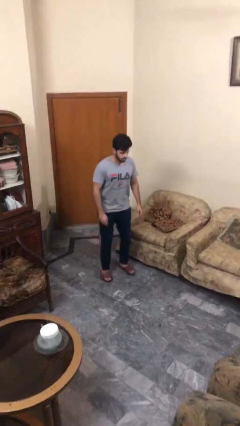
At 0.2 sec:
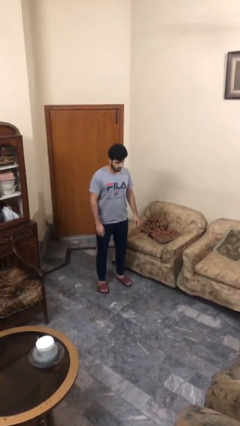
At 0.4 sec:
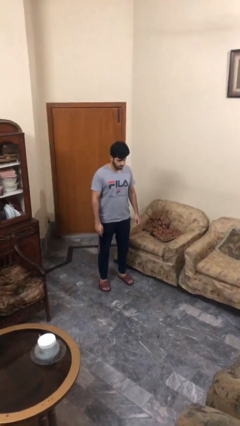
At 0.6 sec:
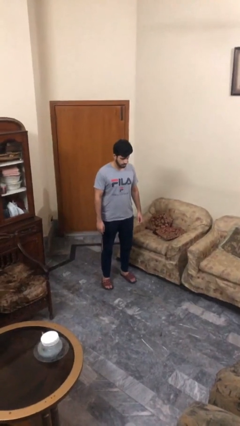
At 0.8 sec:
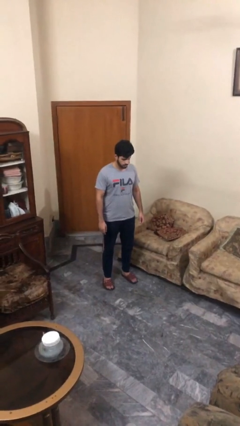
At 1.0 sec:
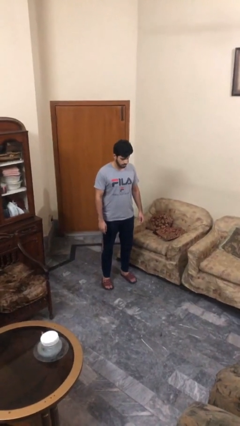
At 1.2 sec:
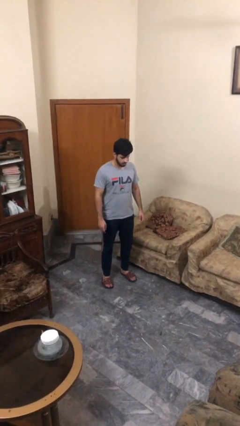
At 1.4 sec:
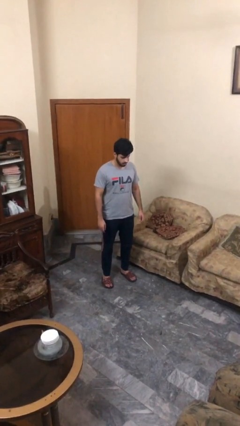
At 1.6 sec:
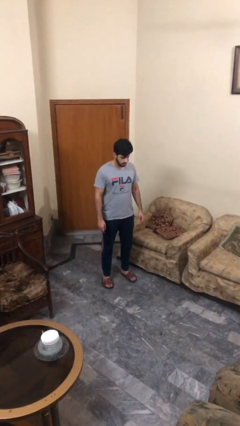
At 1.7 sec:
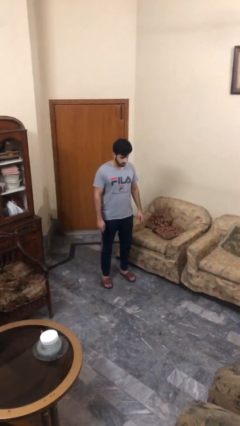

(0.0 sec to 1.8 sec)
person stands up

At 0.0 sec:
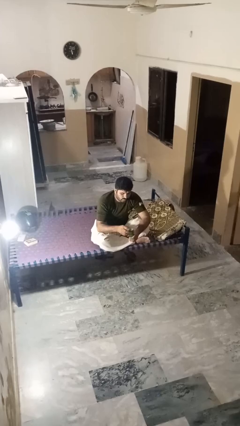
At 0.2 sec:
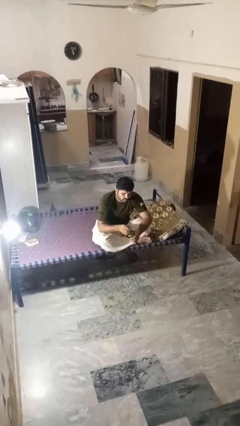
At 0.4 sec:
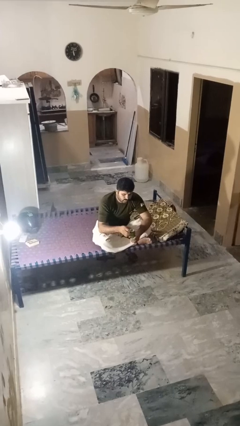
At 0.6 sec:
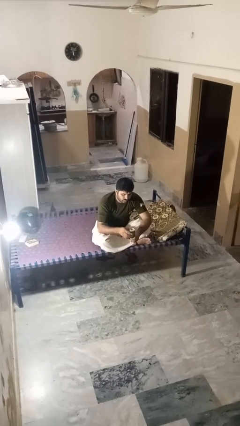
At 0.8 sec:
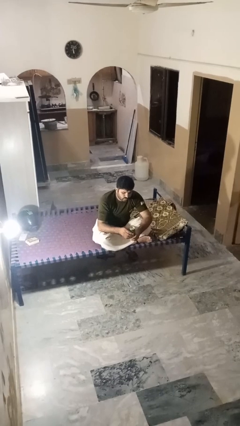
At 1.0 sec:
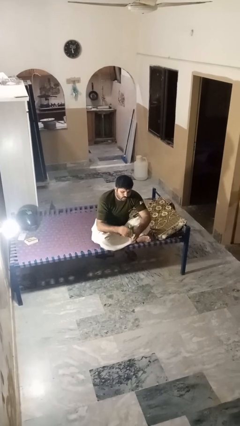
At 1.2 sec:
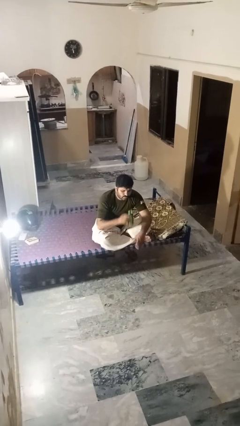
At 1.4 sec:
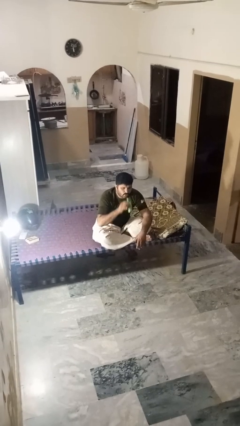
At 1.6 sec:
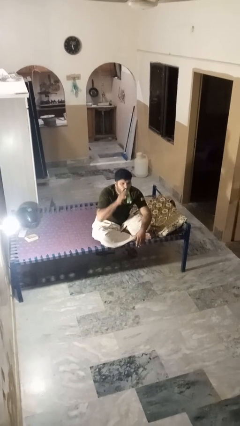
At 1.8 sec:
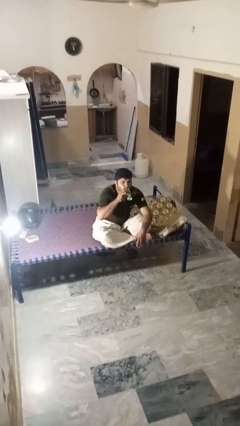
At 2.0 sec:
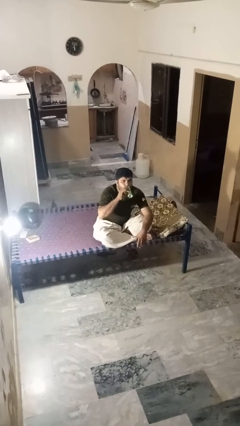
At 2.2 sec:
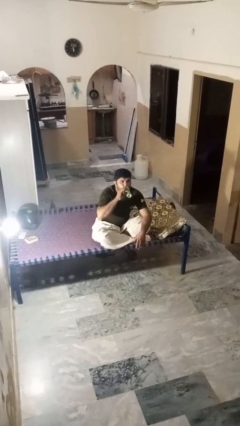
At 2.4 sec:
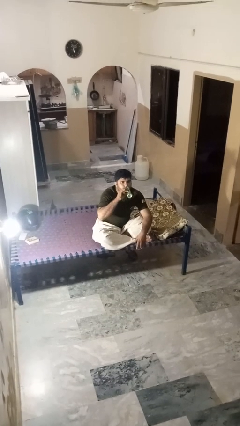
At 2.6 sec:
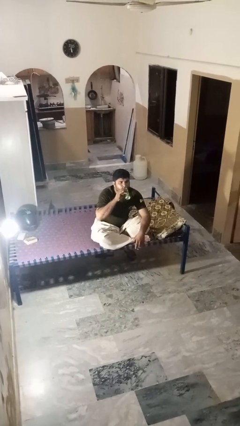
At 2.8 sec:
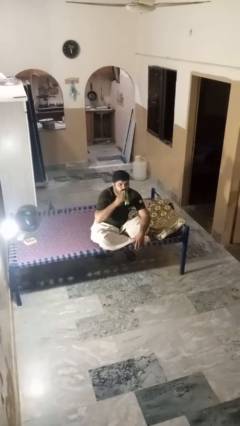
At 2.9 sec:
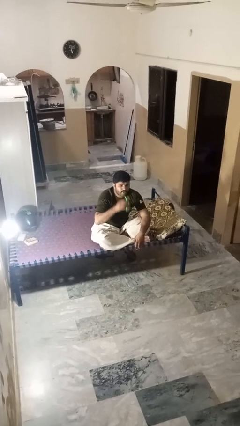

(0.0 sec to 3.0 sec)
person drinks from beverage can

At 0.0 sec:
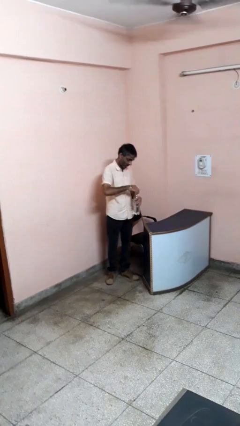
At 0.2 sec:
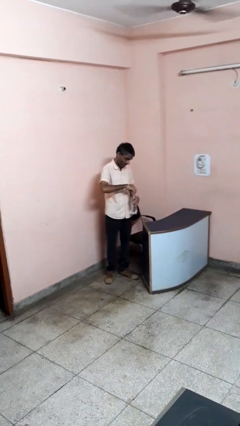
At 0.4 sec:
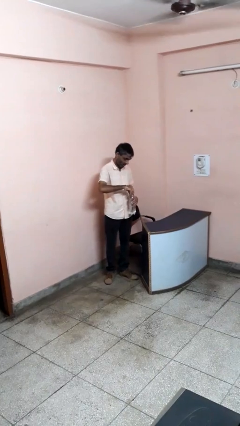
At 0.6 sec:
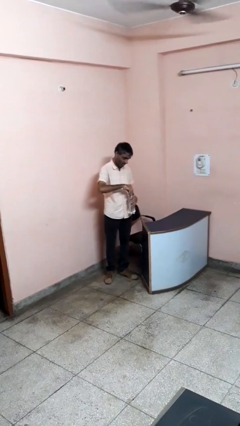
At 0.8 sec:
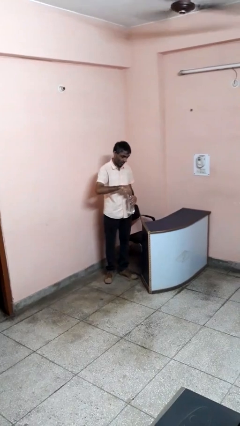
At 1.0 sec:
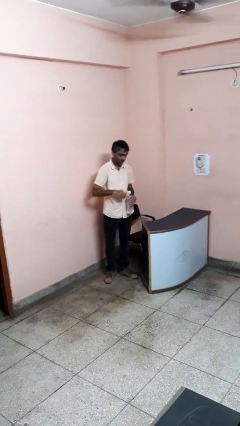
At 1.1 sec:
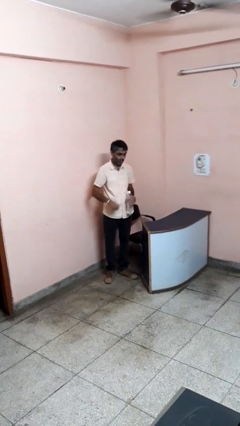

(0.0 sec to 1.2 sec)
person screws lid to bottle

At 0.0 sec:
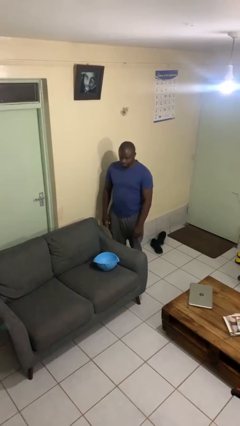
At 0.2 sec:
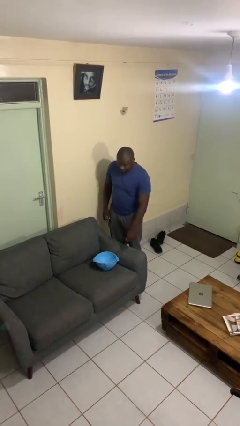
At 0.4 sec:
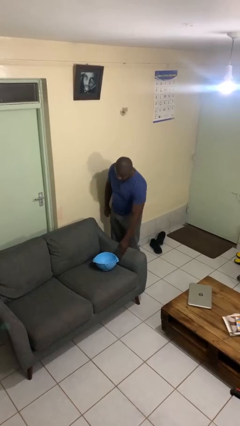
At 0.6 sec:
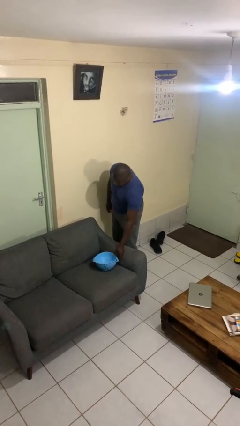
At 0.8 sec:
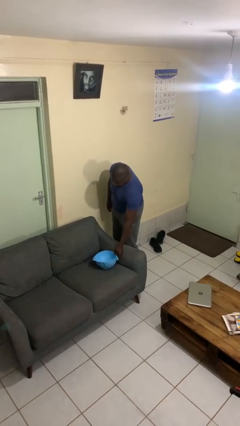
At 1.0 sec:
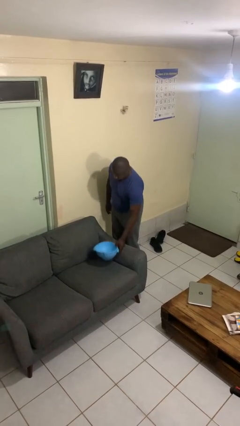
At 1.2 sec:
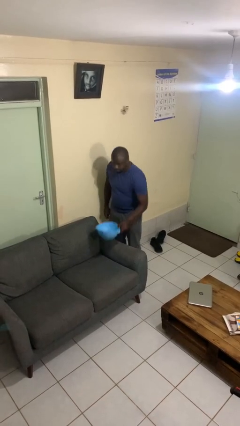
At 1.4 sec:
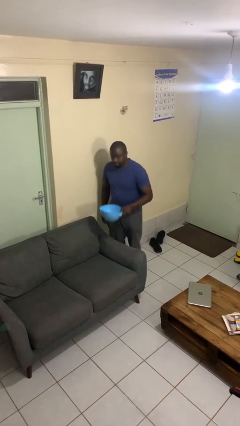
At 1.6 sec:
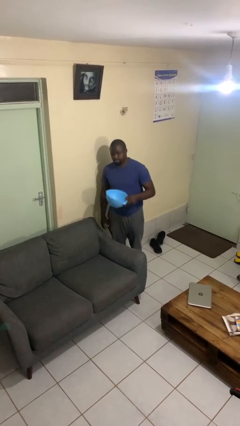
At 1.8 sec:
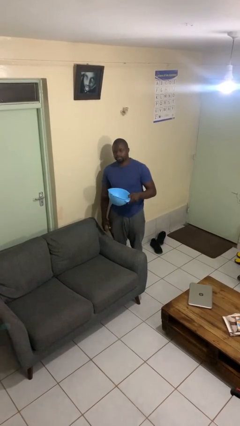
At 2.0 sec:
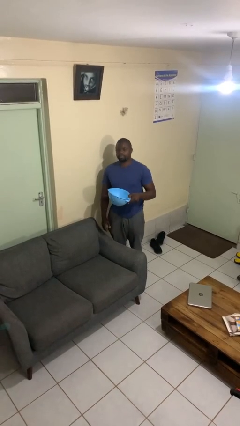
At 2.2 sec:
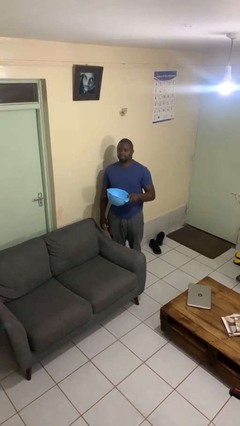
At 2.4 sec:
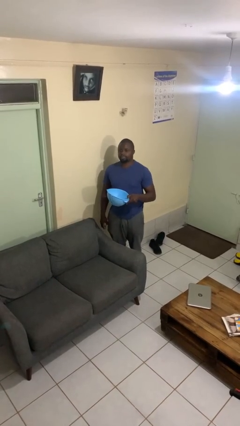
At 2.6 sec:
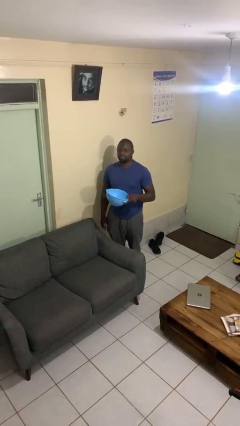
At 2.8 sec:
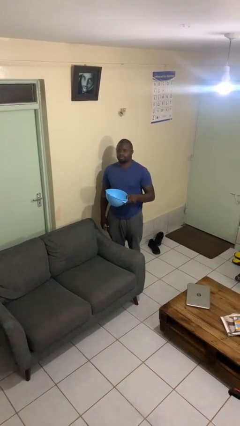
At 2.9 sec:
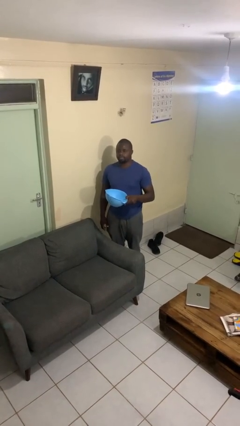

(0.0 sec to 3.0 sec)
person picks up object from couch

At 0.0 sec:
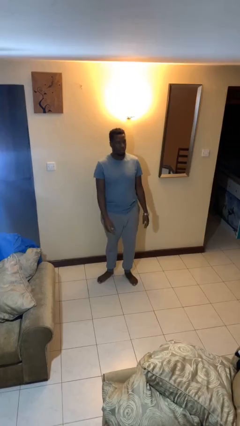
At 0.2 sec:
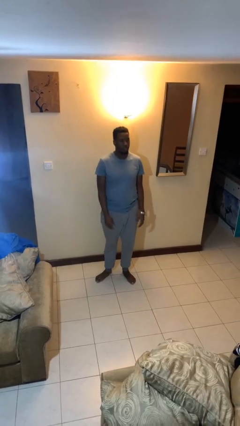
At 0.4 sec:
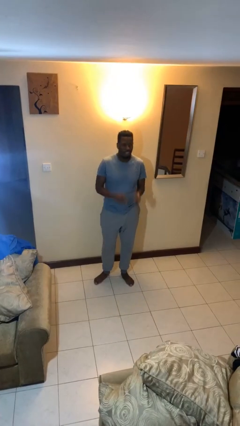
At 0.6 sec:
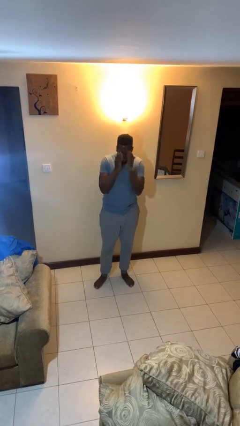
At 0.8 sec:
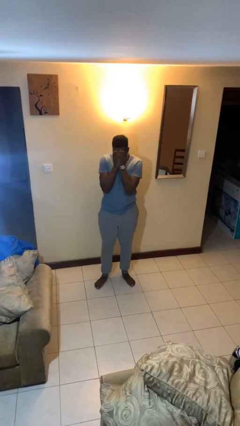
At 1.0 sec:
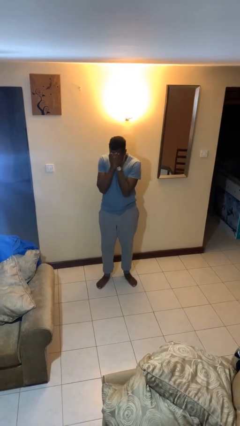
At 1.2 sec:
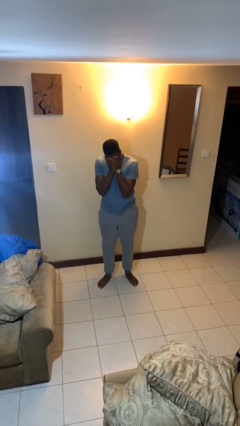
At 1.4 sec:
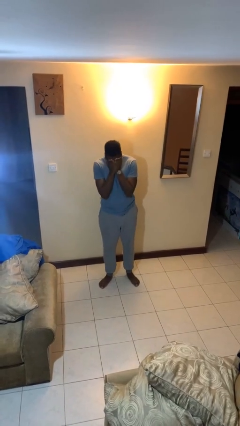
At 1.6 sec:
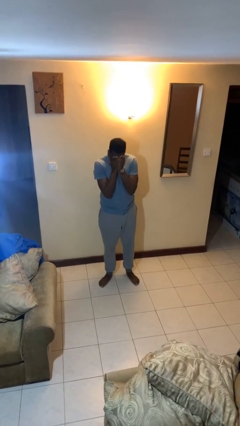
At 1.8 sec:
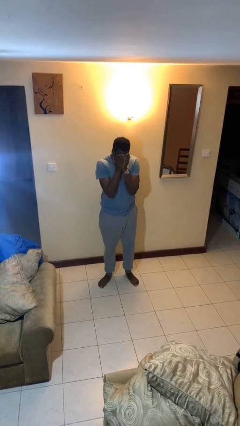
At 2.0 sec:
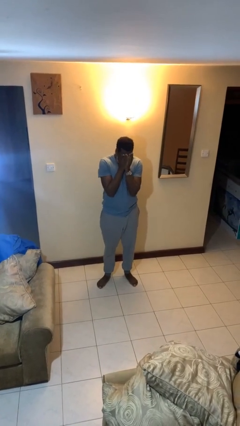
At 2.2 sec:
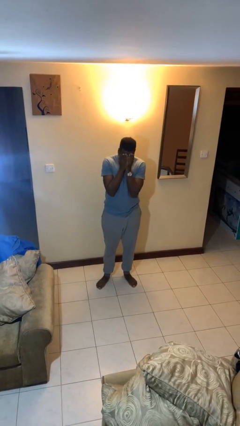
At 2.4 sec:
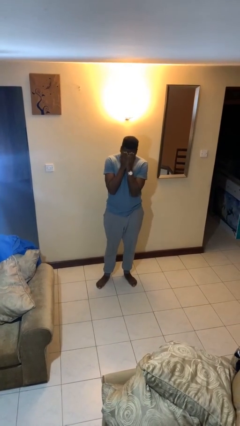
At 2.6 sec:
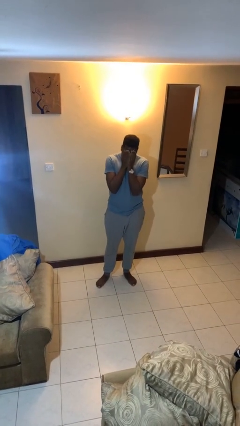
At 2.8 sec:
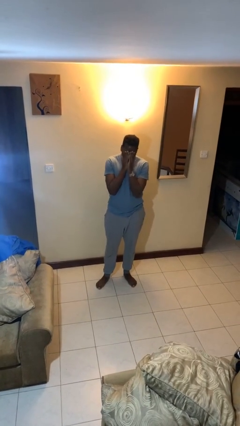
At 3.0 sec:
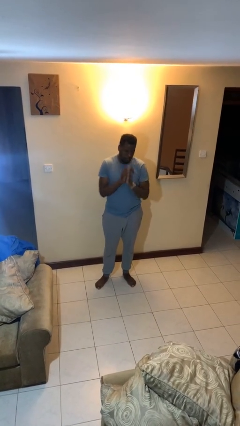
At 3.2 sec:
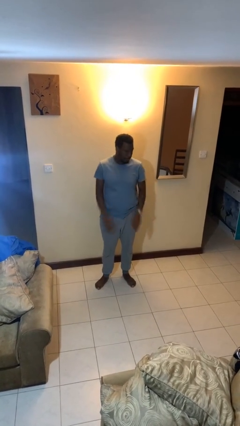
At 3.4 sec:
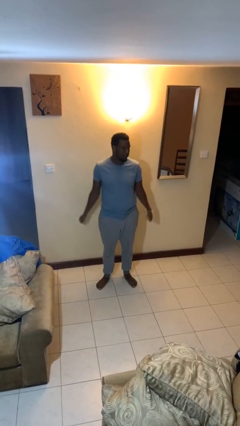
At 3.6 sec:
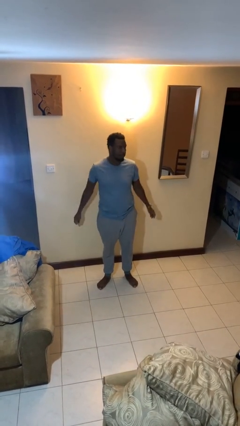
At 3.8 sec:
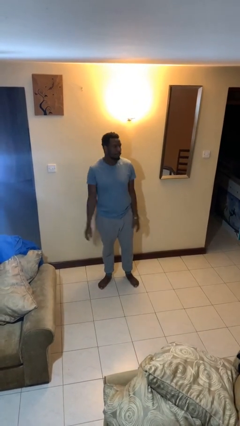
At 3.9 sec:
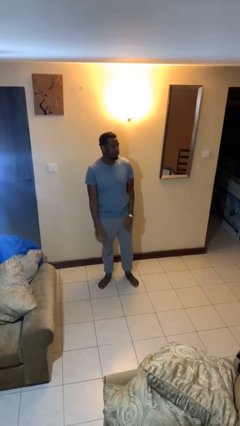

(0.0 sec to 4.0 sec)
person covers face with hands

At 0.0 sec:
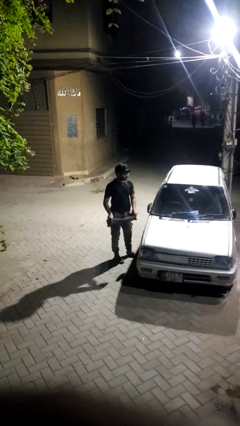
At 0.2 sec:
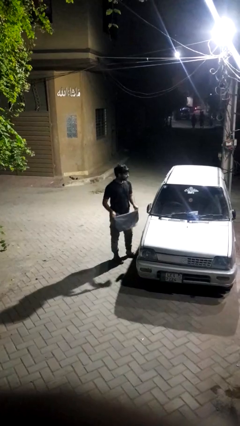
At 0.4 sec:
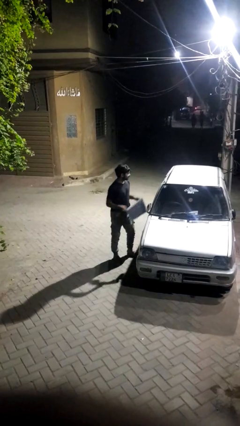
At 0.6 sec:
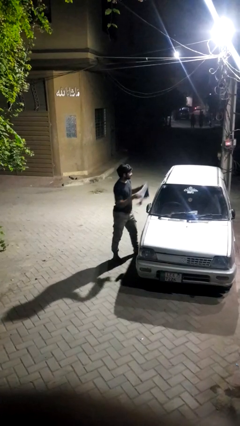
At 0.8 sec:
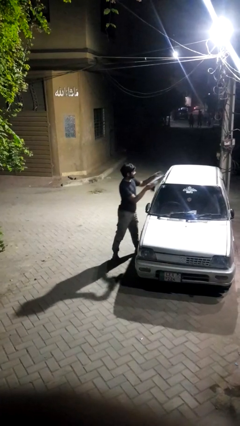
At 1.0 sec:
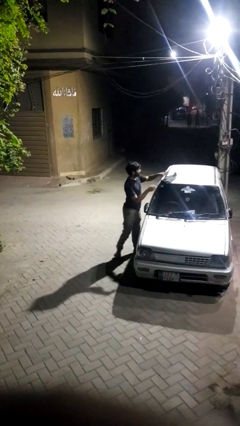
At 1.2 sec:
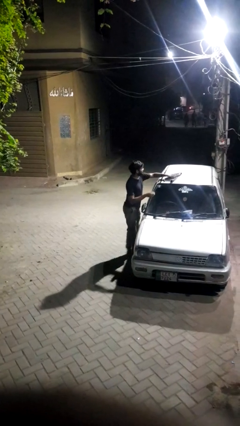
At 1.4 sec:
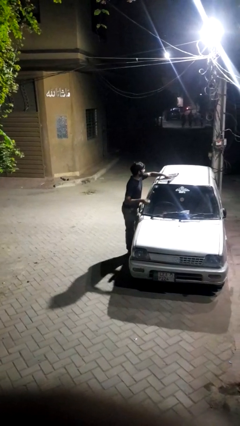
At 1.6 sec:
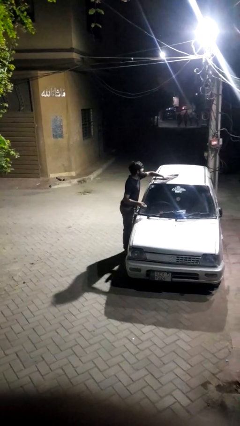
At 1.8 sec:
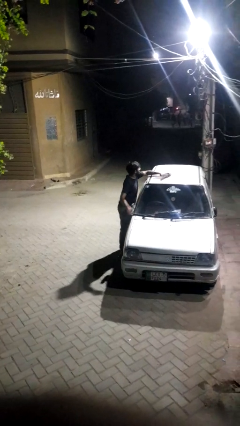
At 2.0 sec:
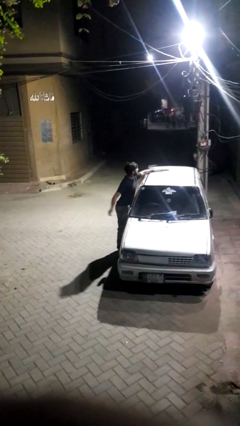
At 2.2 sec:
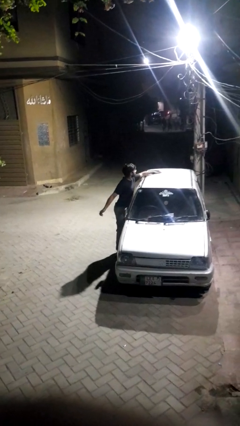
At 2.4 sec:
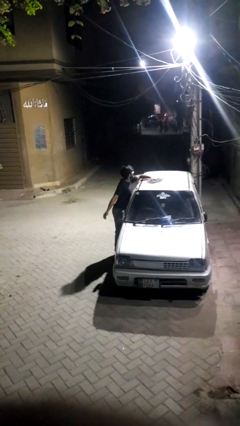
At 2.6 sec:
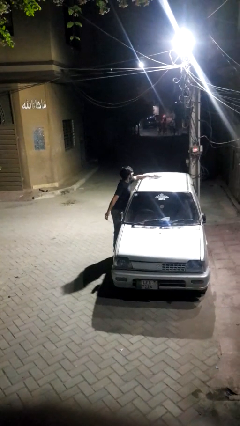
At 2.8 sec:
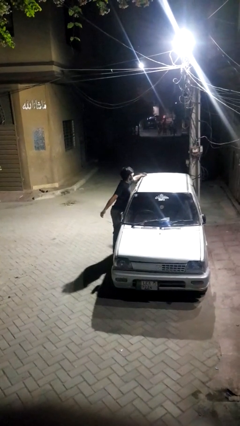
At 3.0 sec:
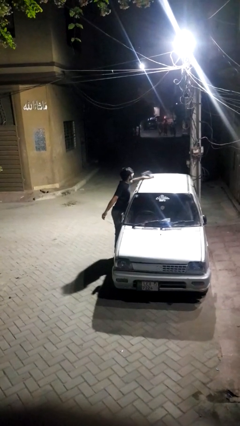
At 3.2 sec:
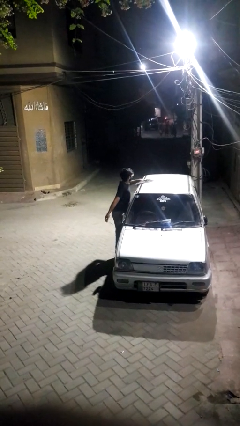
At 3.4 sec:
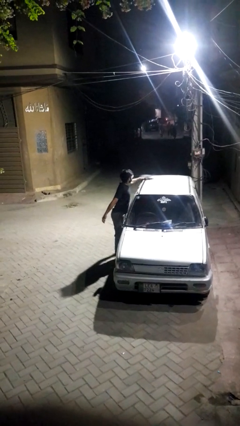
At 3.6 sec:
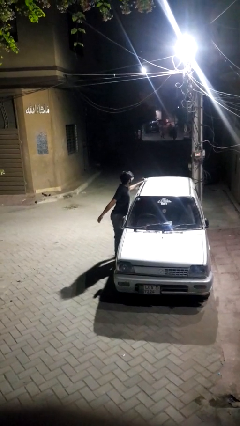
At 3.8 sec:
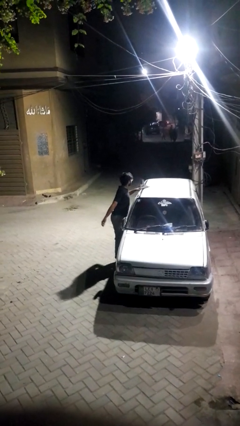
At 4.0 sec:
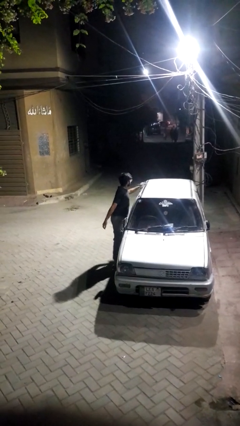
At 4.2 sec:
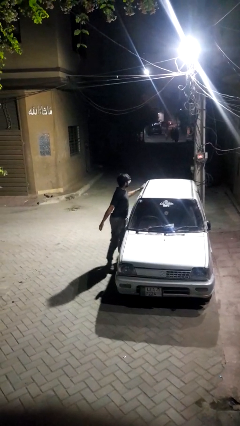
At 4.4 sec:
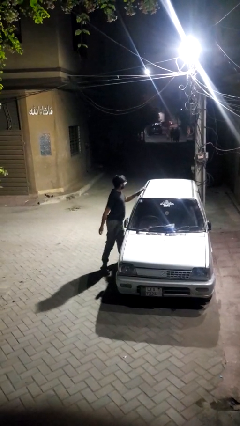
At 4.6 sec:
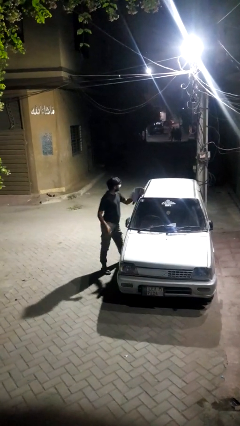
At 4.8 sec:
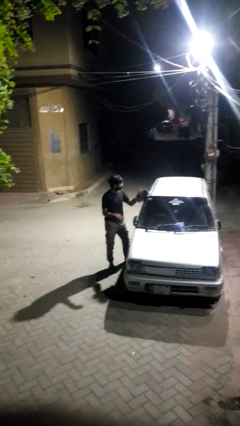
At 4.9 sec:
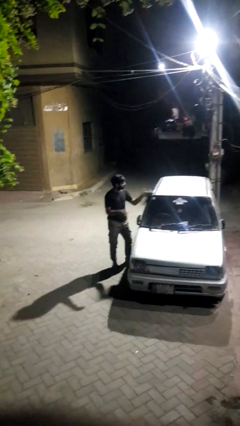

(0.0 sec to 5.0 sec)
person polishes car with rag
